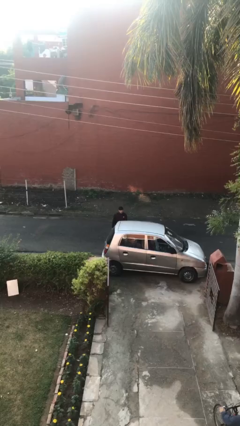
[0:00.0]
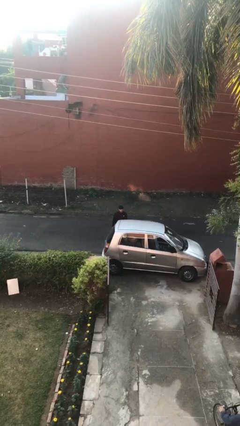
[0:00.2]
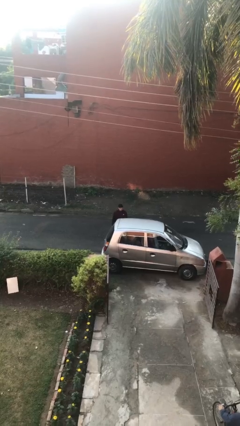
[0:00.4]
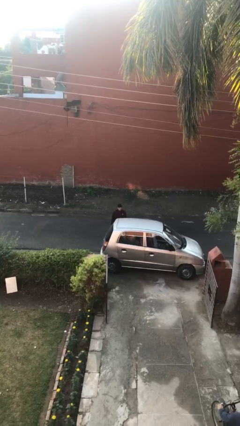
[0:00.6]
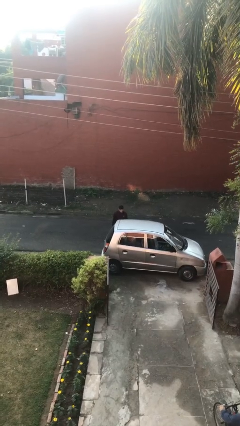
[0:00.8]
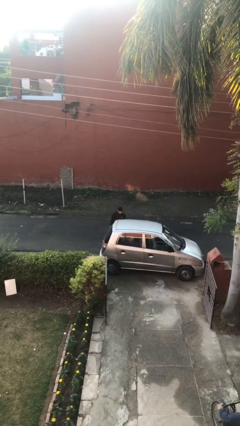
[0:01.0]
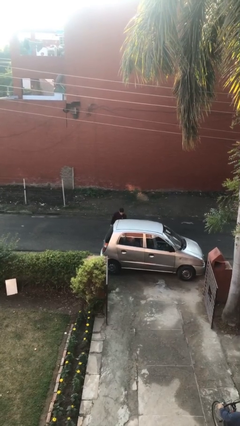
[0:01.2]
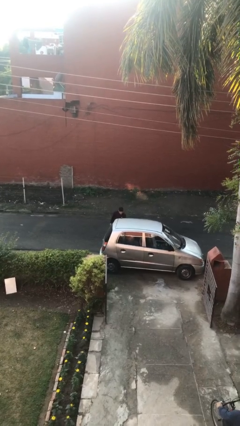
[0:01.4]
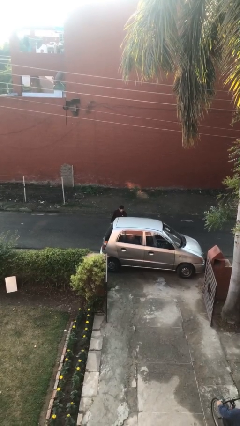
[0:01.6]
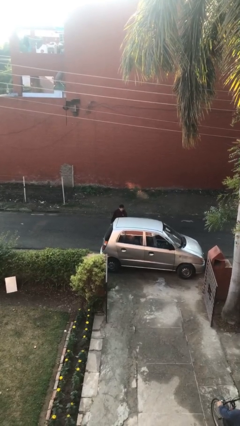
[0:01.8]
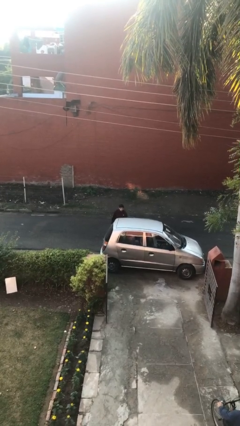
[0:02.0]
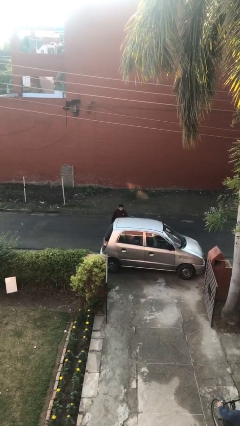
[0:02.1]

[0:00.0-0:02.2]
person opens car door

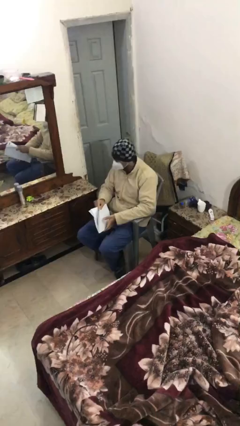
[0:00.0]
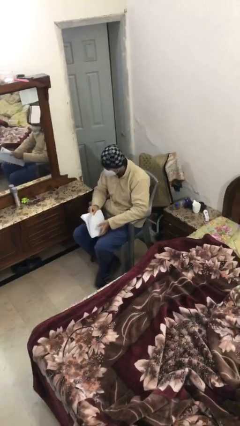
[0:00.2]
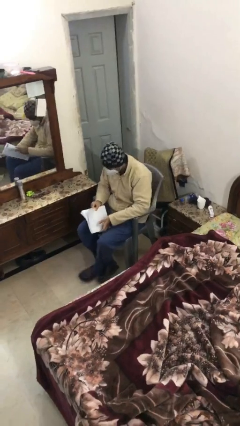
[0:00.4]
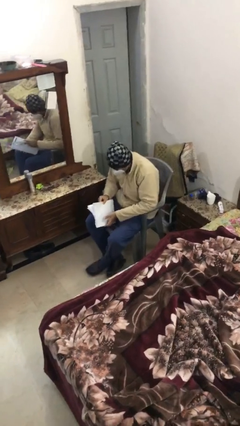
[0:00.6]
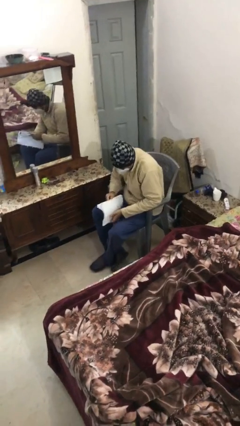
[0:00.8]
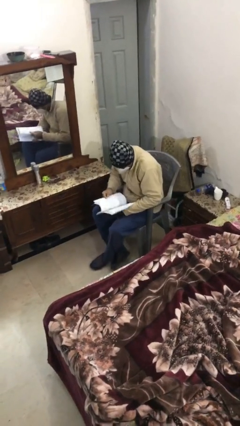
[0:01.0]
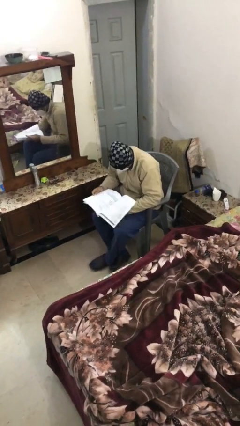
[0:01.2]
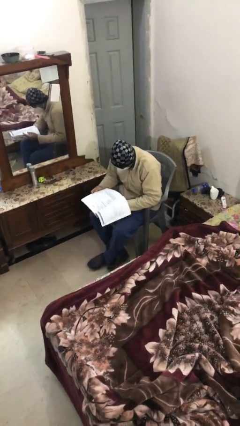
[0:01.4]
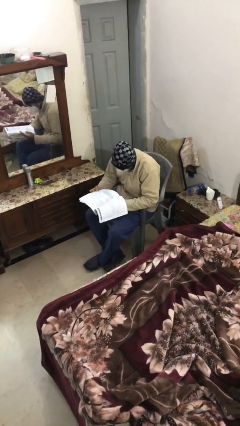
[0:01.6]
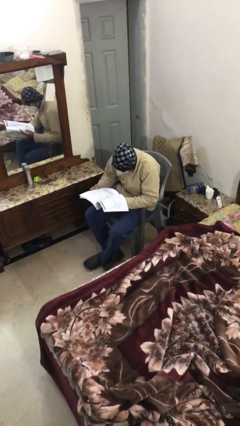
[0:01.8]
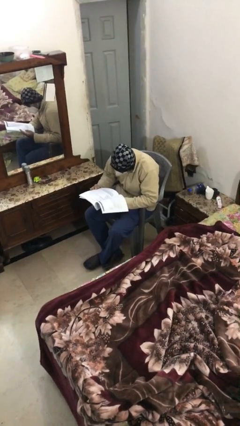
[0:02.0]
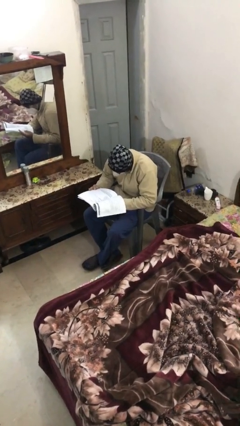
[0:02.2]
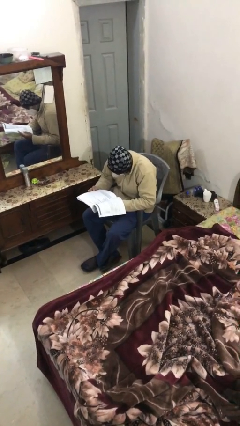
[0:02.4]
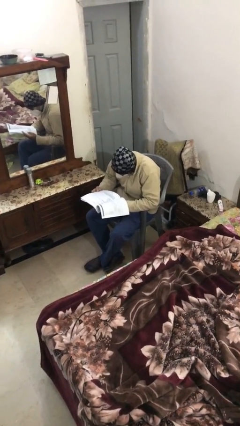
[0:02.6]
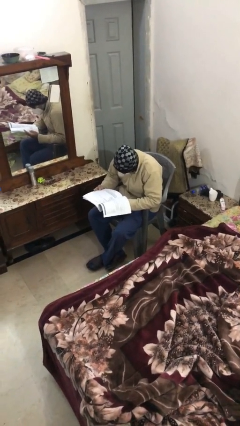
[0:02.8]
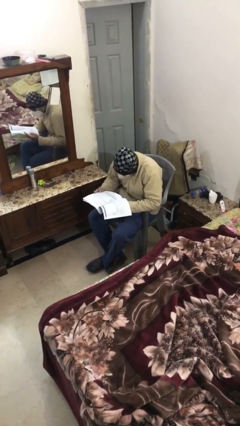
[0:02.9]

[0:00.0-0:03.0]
person reads document

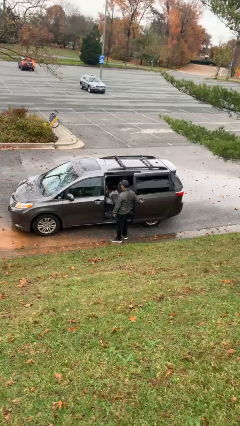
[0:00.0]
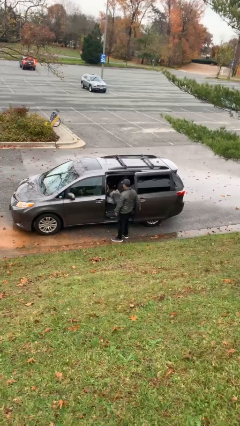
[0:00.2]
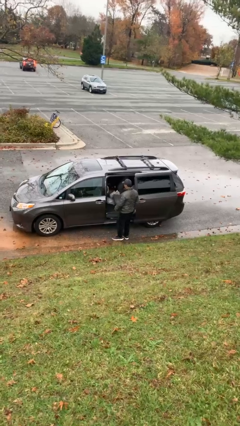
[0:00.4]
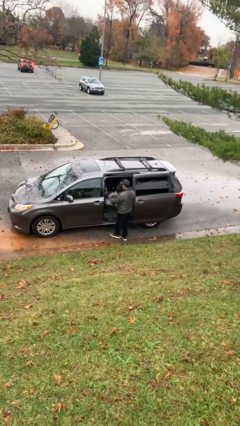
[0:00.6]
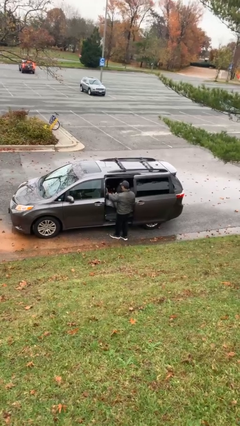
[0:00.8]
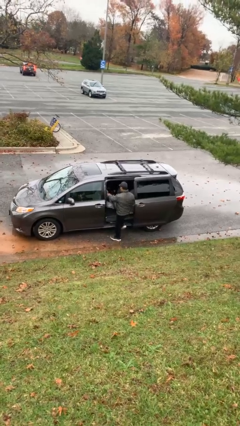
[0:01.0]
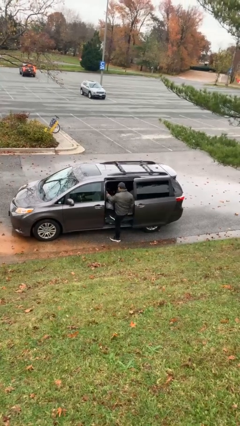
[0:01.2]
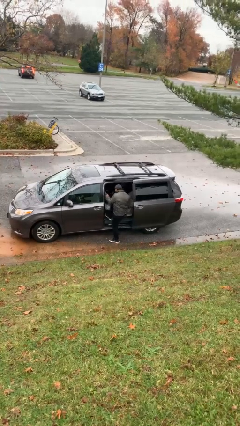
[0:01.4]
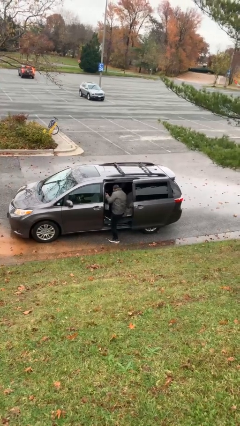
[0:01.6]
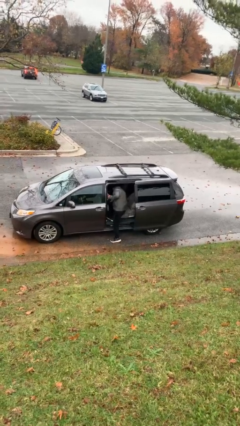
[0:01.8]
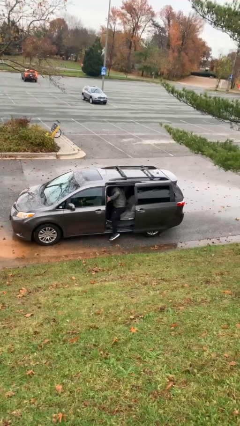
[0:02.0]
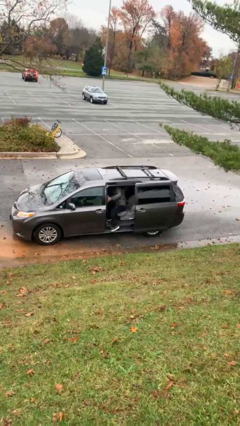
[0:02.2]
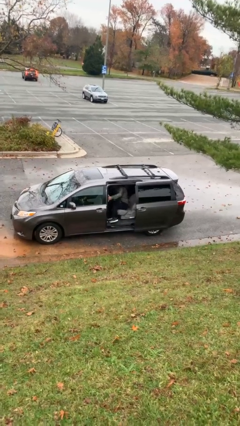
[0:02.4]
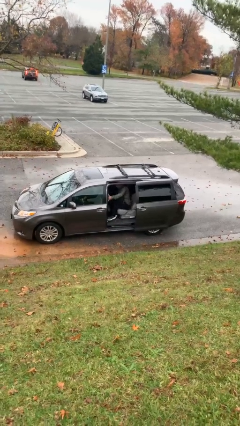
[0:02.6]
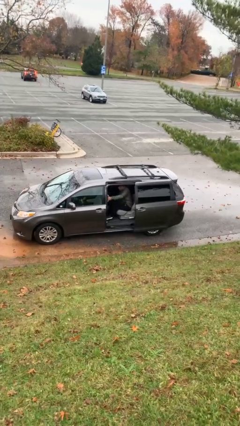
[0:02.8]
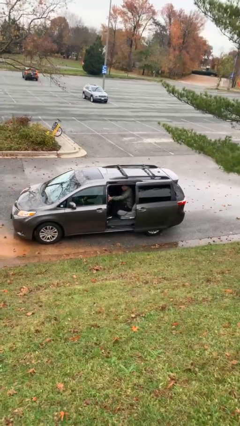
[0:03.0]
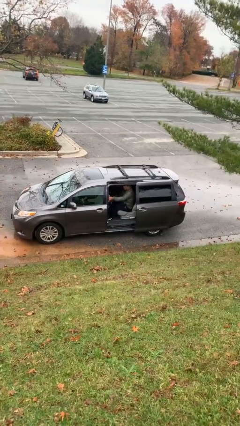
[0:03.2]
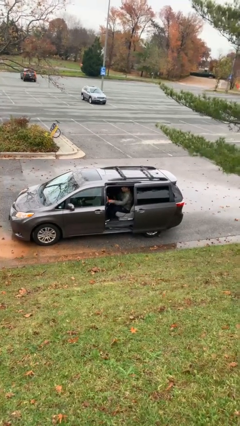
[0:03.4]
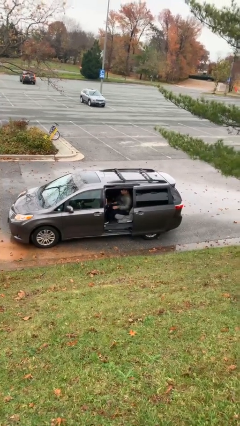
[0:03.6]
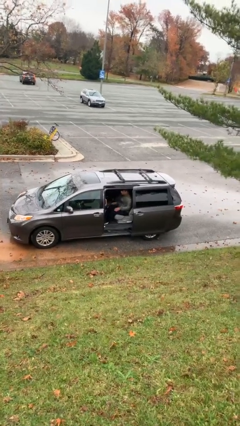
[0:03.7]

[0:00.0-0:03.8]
person enters car

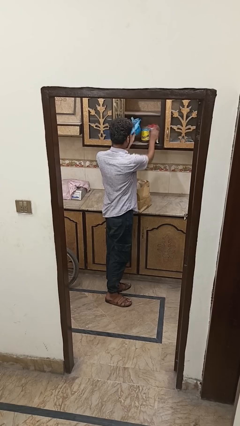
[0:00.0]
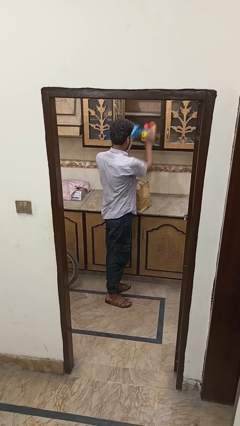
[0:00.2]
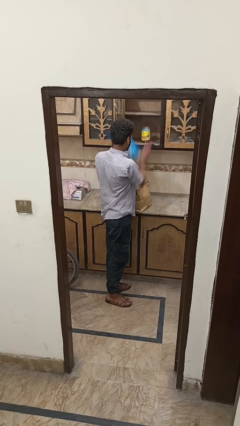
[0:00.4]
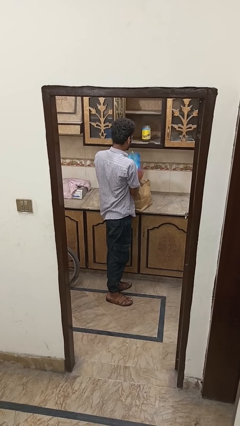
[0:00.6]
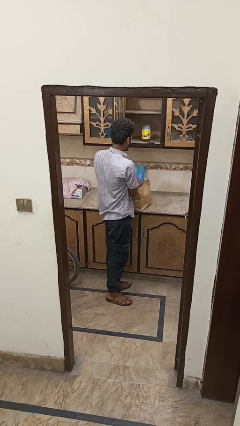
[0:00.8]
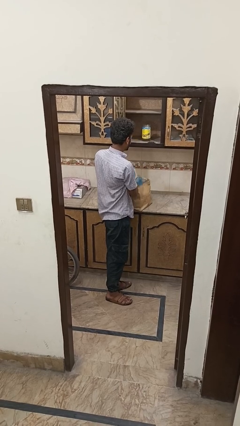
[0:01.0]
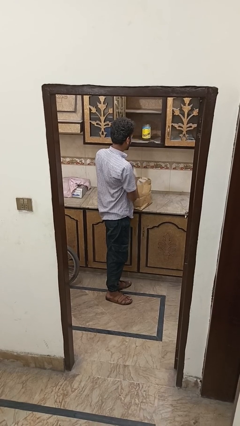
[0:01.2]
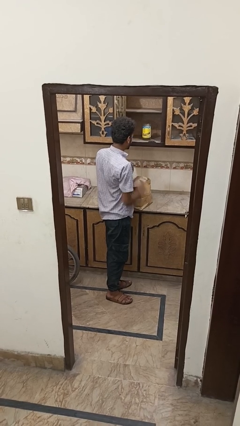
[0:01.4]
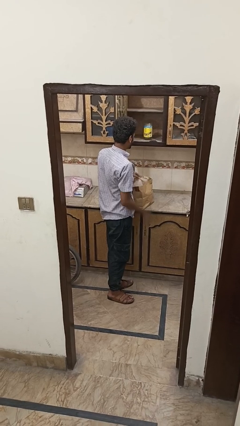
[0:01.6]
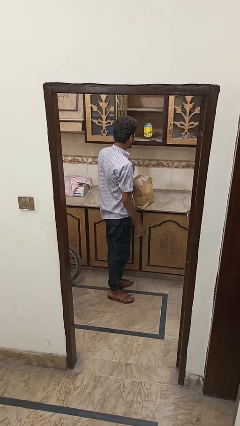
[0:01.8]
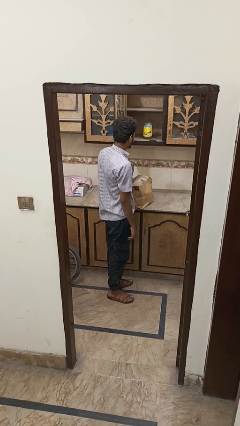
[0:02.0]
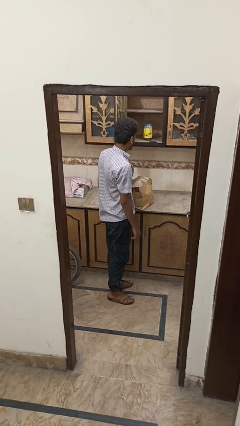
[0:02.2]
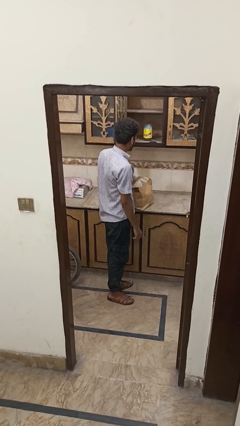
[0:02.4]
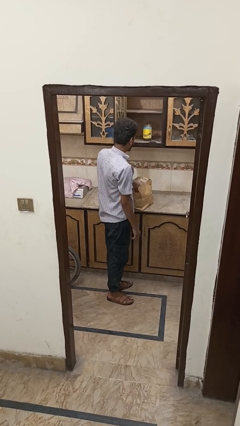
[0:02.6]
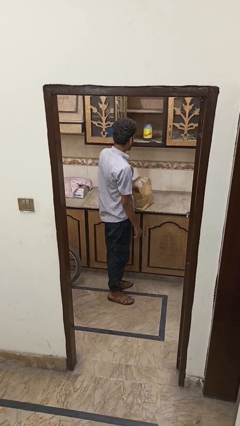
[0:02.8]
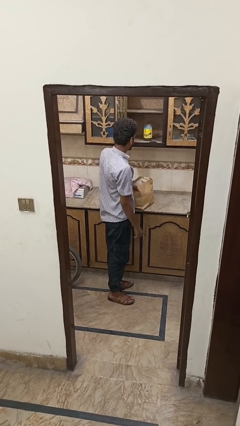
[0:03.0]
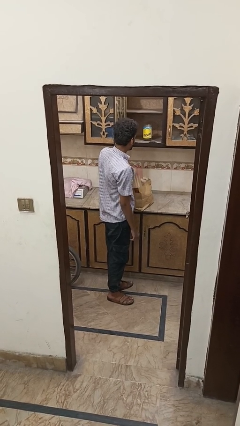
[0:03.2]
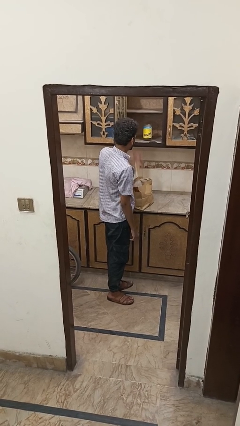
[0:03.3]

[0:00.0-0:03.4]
person covers with bedsheets

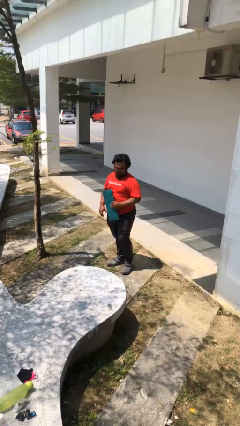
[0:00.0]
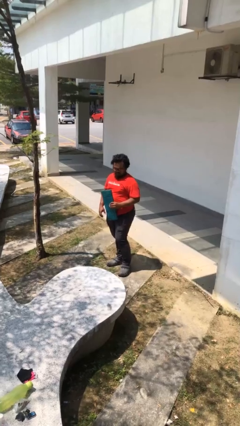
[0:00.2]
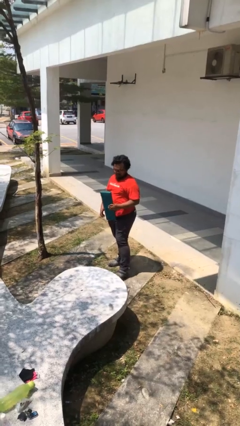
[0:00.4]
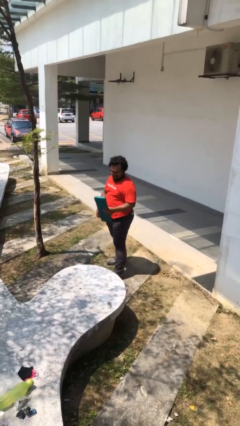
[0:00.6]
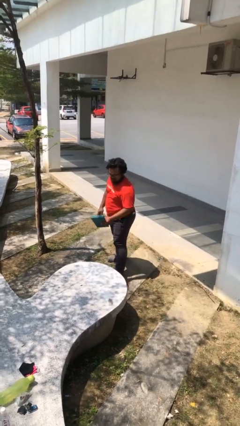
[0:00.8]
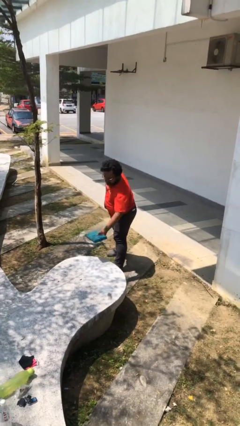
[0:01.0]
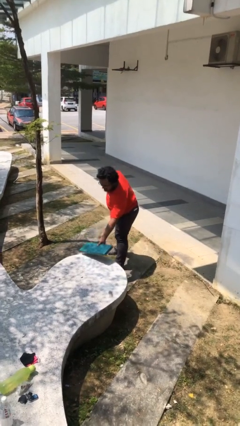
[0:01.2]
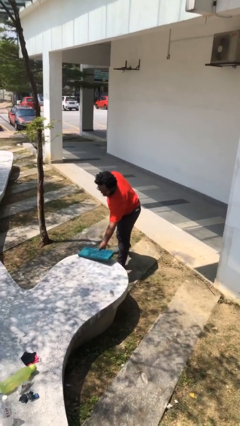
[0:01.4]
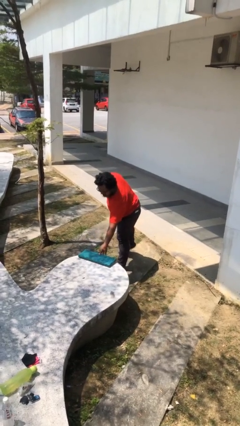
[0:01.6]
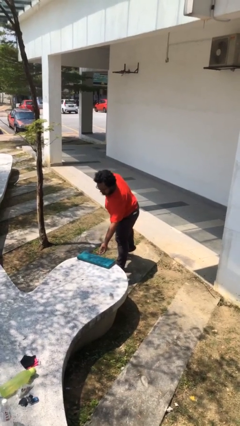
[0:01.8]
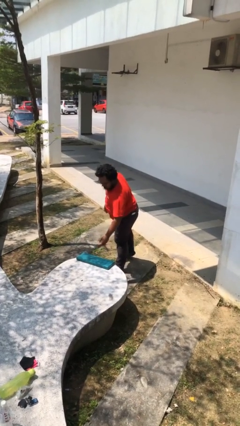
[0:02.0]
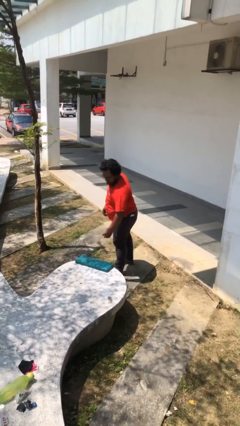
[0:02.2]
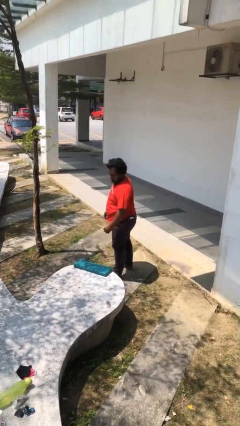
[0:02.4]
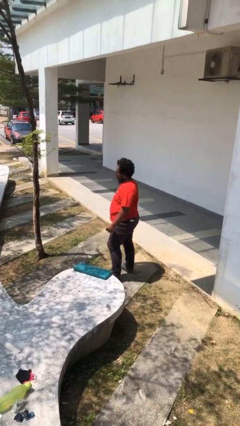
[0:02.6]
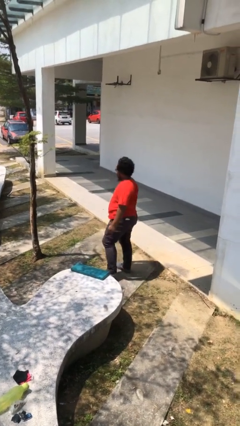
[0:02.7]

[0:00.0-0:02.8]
person puts down object on table

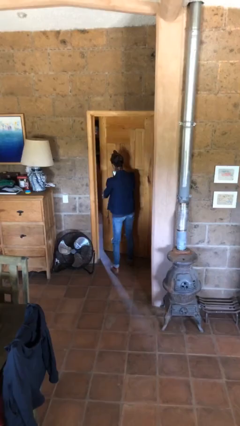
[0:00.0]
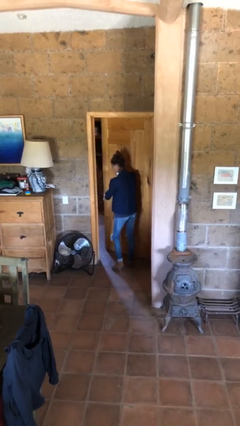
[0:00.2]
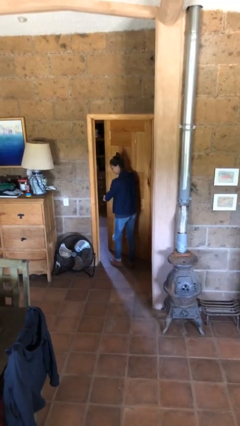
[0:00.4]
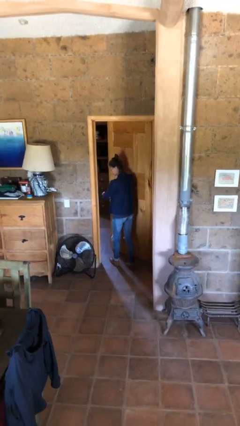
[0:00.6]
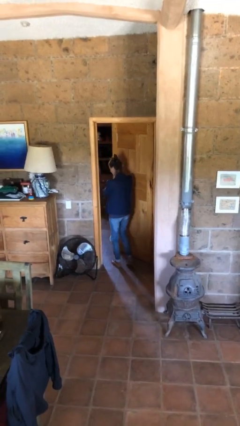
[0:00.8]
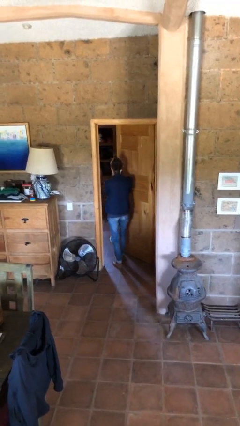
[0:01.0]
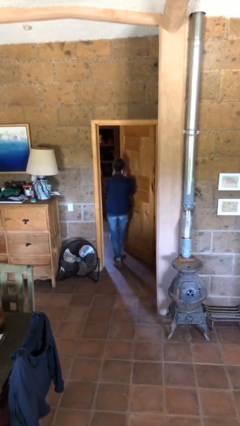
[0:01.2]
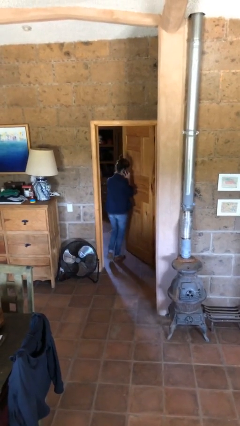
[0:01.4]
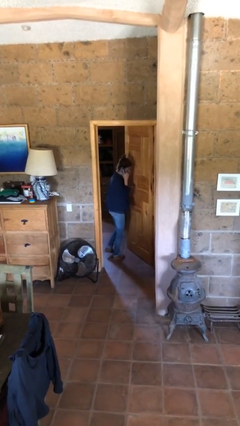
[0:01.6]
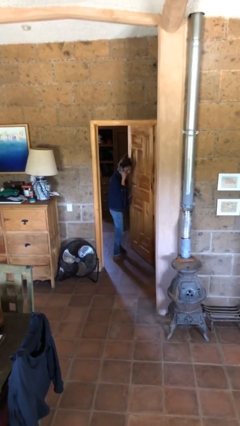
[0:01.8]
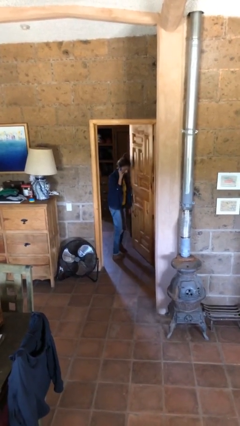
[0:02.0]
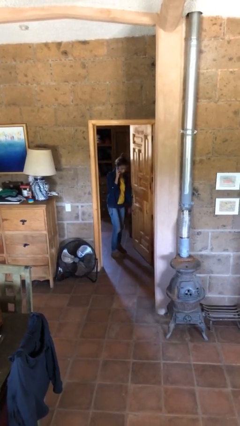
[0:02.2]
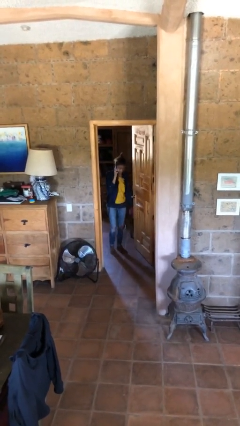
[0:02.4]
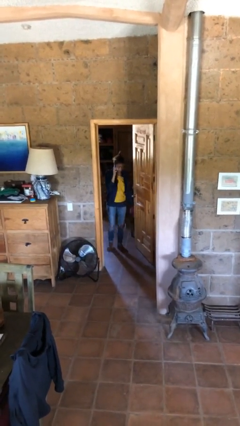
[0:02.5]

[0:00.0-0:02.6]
person exits scene through structure
